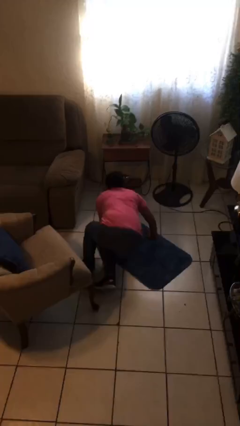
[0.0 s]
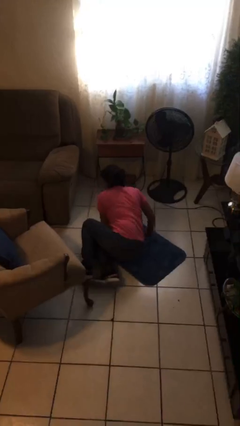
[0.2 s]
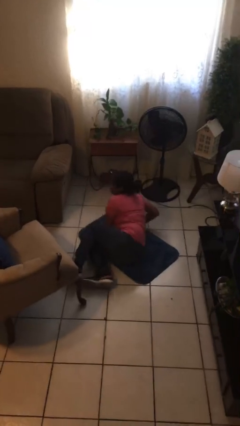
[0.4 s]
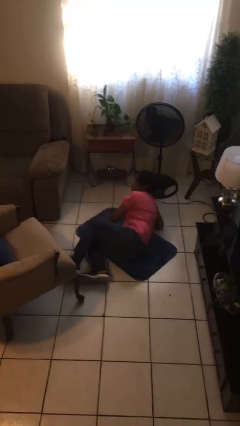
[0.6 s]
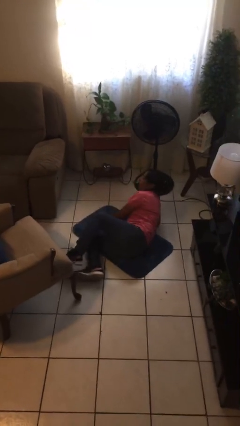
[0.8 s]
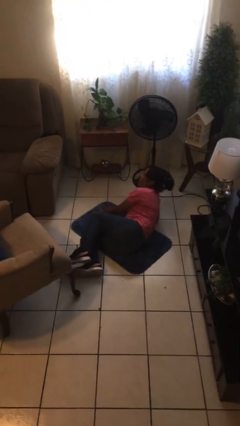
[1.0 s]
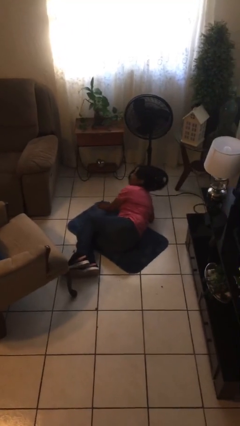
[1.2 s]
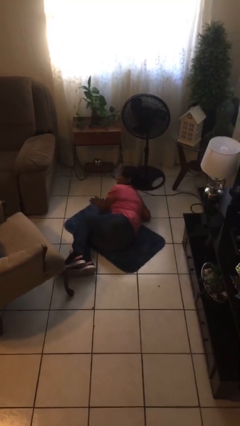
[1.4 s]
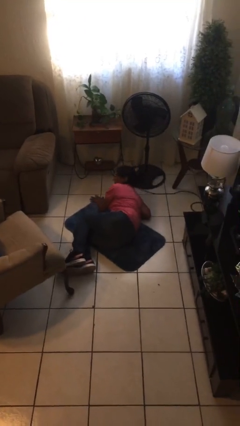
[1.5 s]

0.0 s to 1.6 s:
person falls from chair

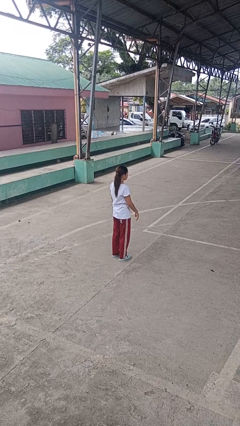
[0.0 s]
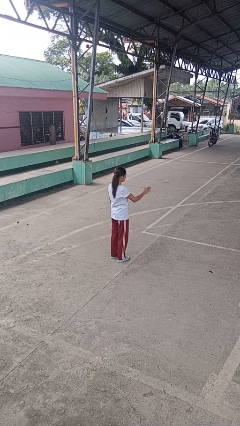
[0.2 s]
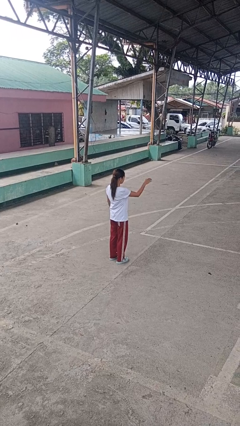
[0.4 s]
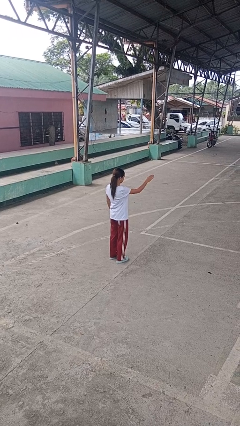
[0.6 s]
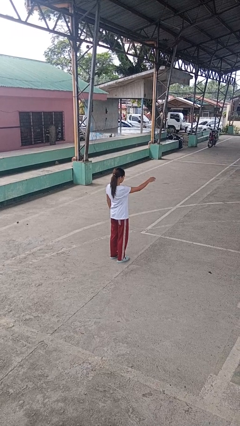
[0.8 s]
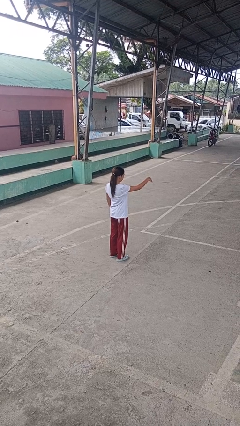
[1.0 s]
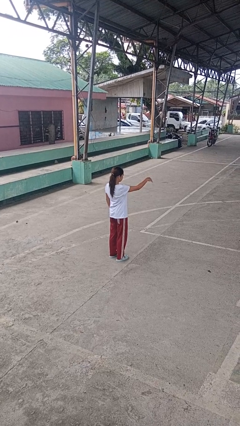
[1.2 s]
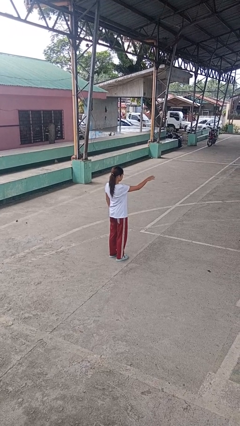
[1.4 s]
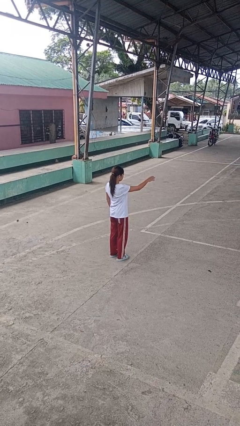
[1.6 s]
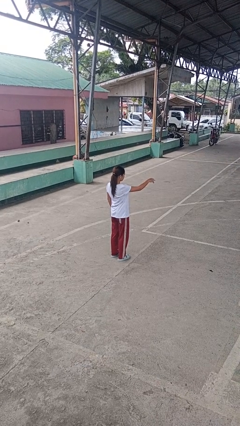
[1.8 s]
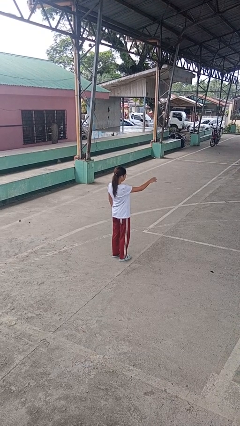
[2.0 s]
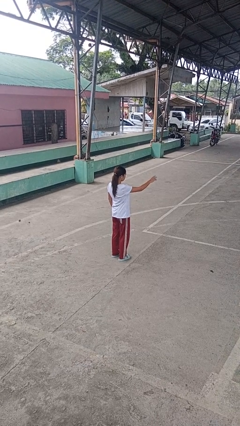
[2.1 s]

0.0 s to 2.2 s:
person gestures come here

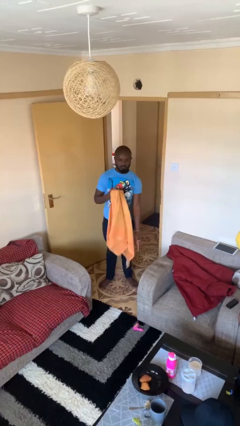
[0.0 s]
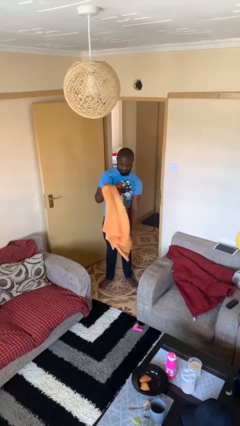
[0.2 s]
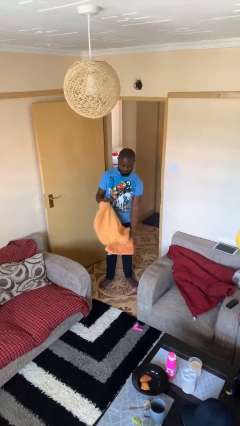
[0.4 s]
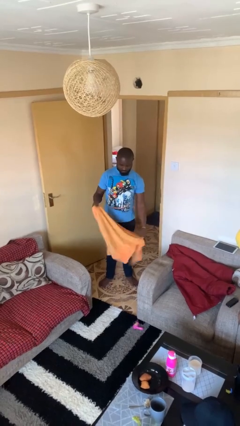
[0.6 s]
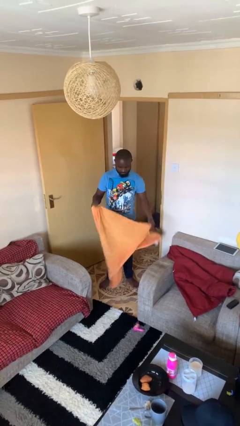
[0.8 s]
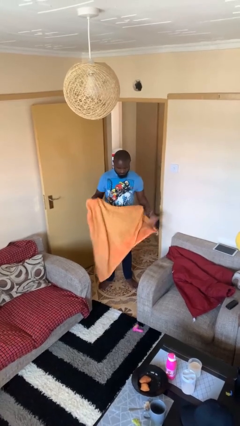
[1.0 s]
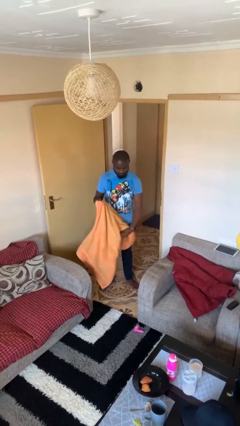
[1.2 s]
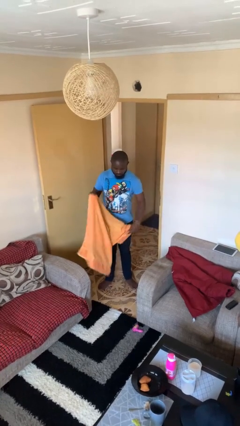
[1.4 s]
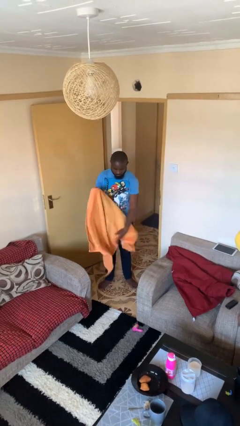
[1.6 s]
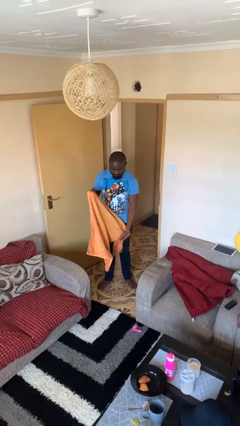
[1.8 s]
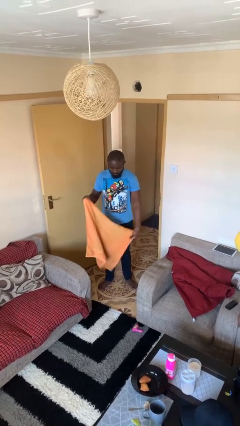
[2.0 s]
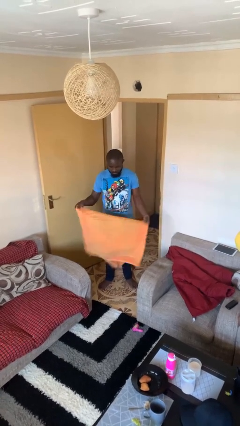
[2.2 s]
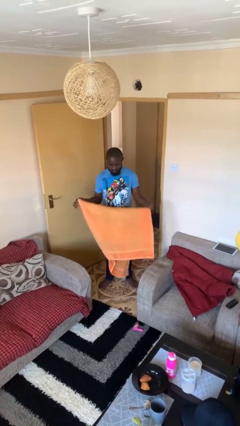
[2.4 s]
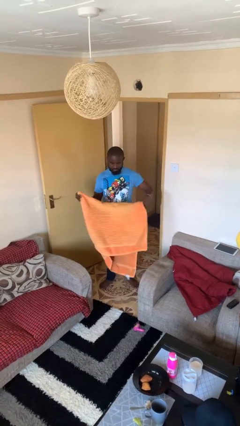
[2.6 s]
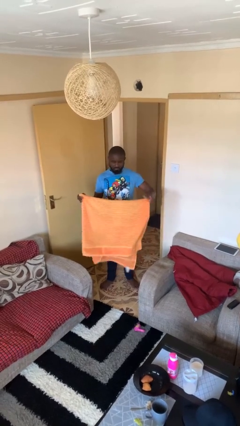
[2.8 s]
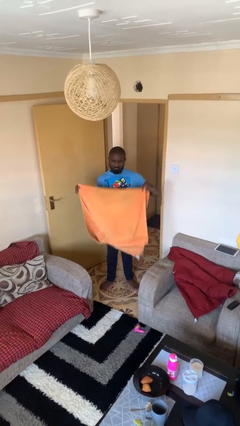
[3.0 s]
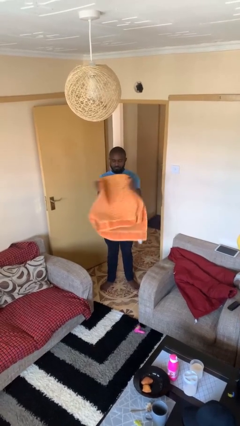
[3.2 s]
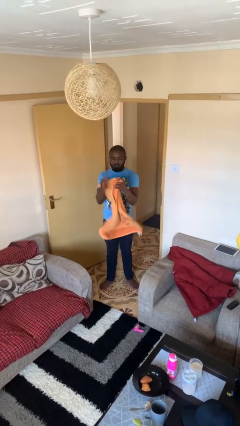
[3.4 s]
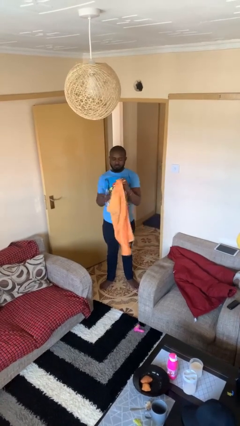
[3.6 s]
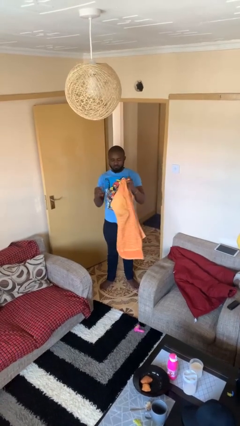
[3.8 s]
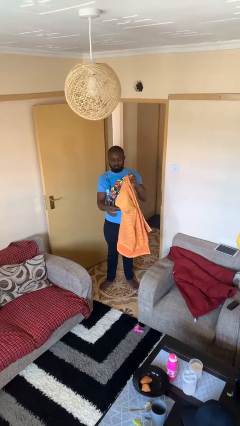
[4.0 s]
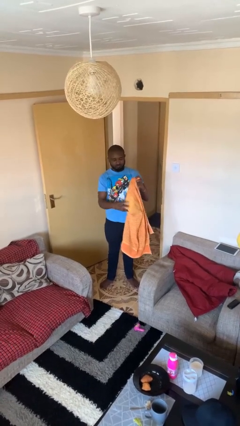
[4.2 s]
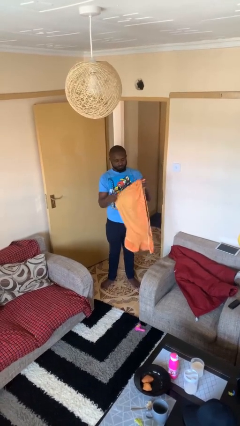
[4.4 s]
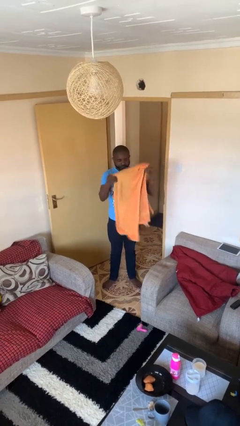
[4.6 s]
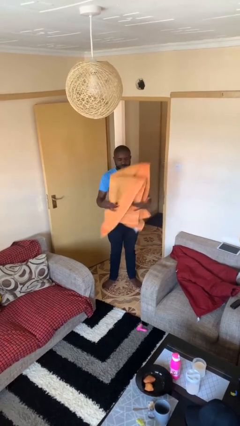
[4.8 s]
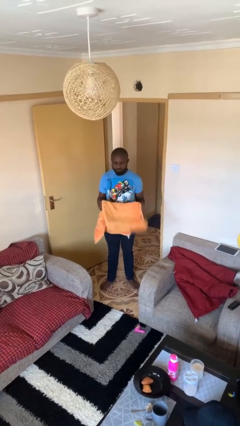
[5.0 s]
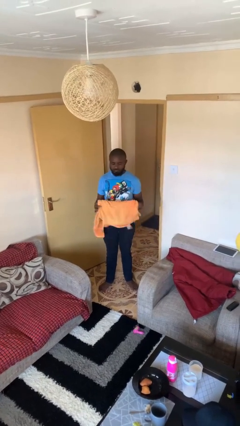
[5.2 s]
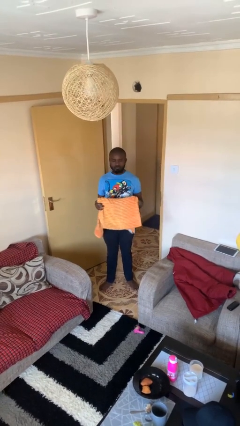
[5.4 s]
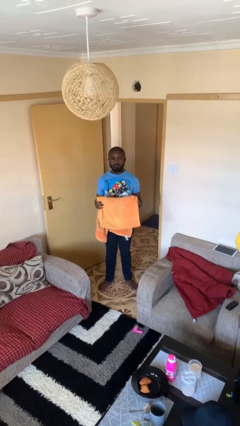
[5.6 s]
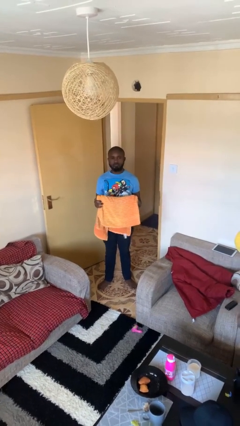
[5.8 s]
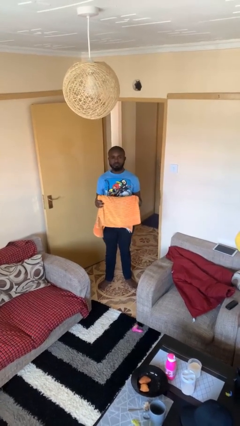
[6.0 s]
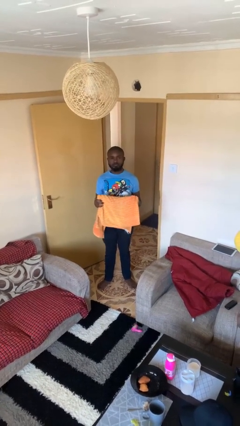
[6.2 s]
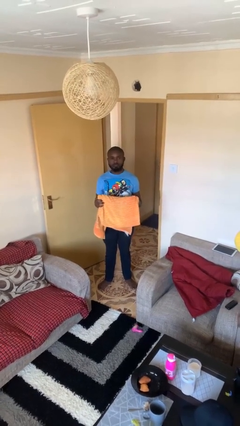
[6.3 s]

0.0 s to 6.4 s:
person folds towel

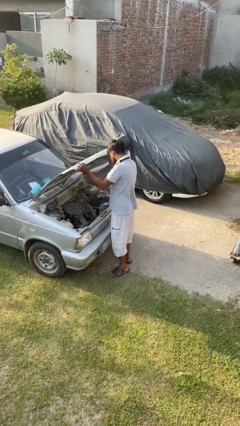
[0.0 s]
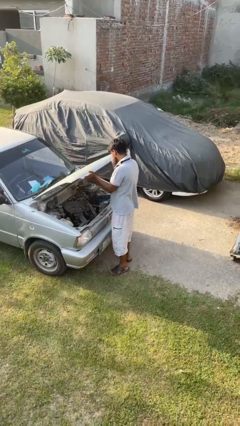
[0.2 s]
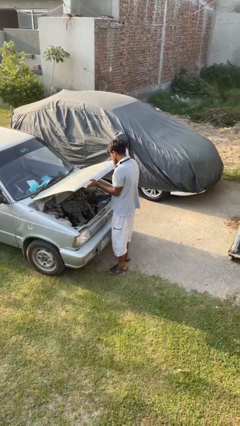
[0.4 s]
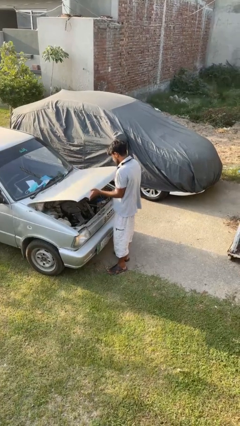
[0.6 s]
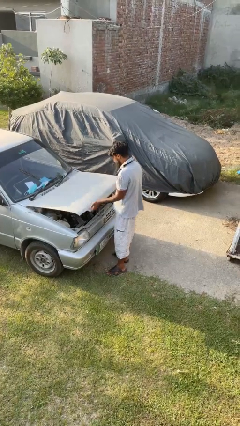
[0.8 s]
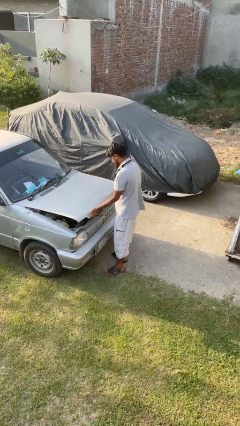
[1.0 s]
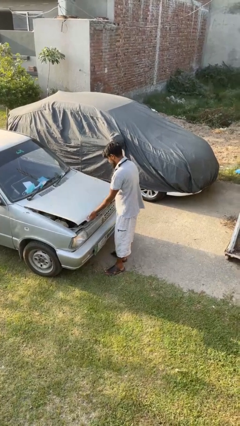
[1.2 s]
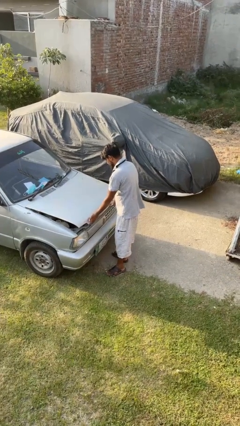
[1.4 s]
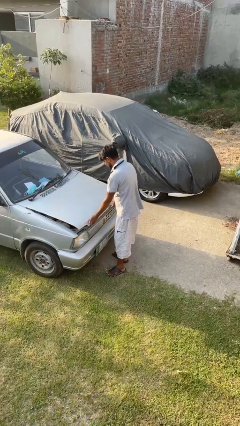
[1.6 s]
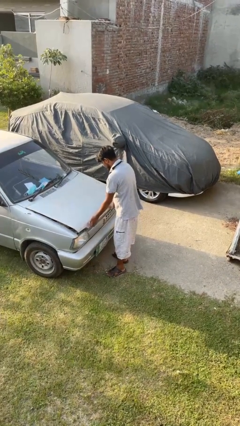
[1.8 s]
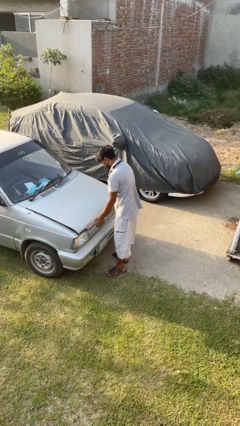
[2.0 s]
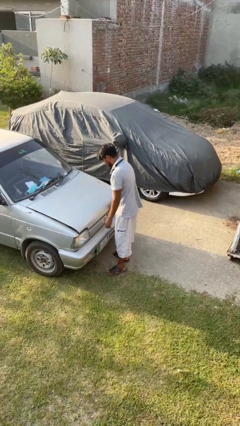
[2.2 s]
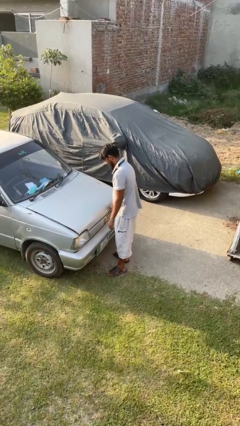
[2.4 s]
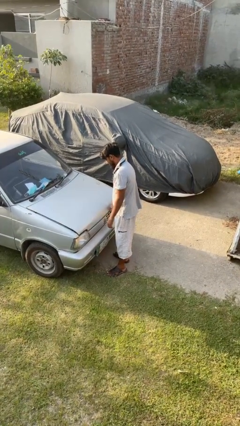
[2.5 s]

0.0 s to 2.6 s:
person closes car hood

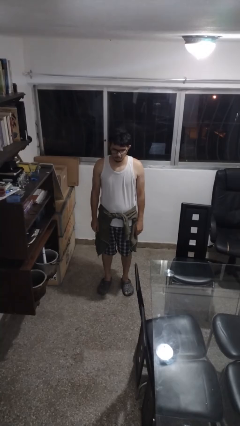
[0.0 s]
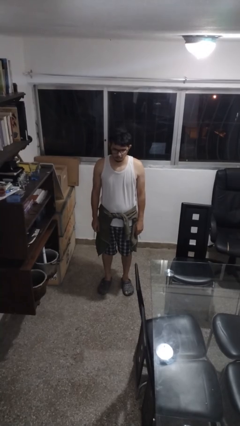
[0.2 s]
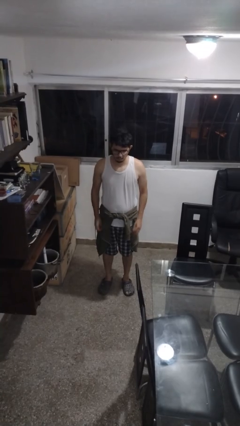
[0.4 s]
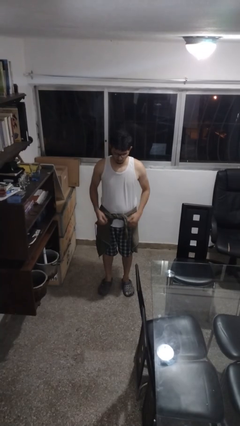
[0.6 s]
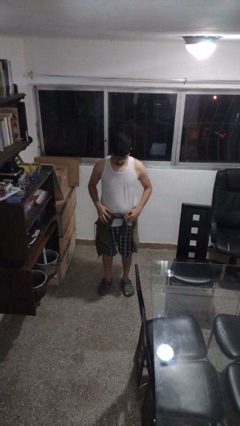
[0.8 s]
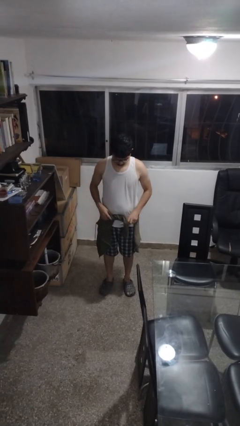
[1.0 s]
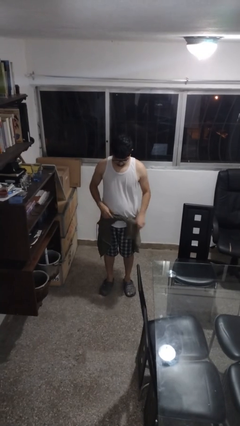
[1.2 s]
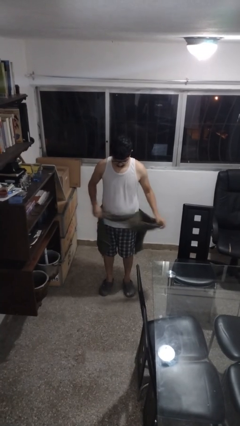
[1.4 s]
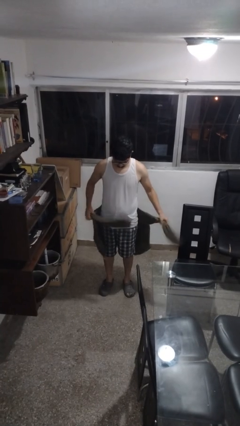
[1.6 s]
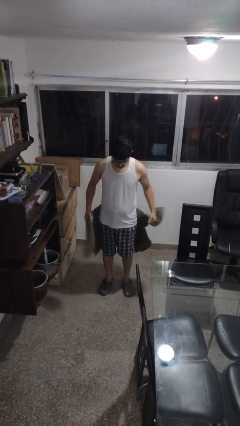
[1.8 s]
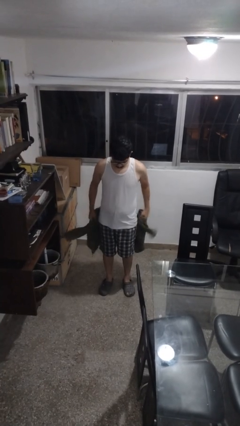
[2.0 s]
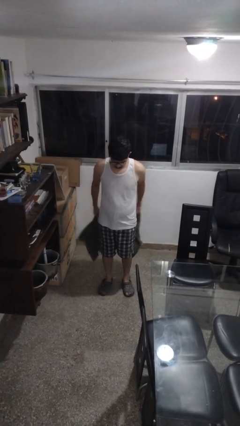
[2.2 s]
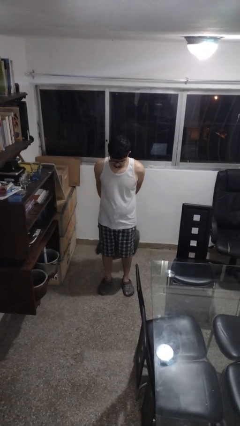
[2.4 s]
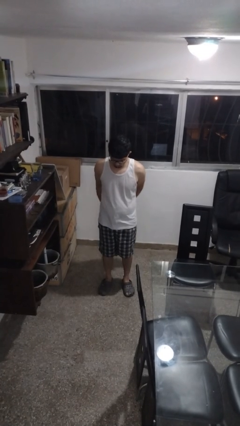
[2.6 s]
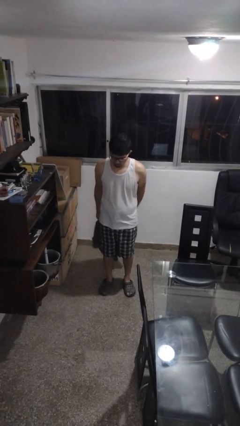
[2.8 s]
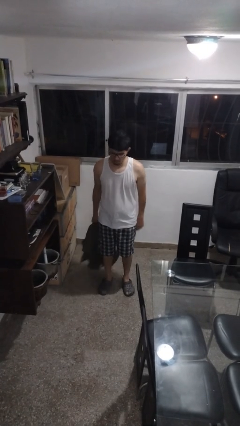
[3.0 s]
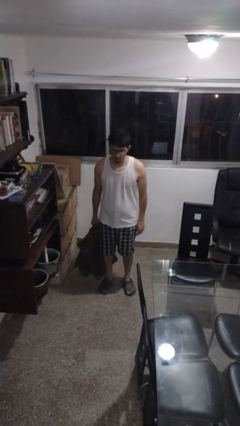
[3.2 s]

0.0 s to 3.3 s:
person unties jacket around waist

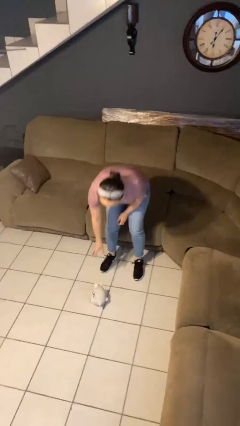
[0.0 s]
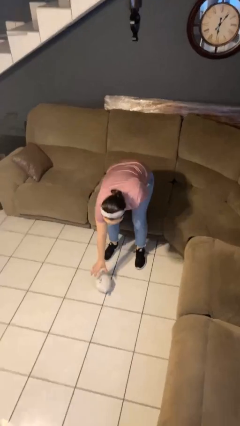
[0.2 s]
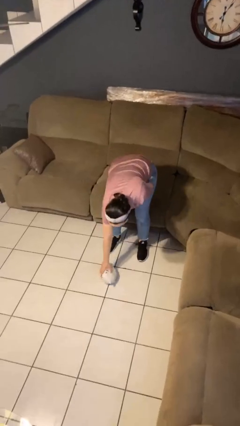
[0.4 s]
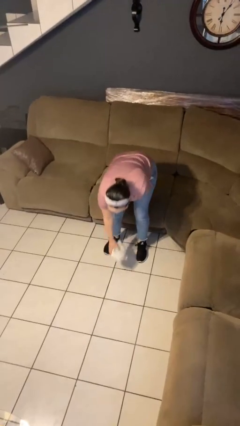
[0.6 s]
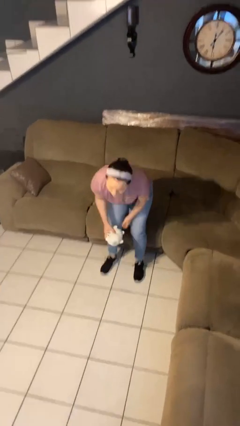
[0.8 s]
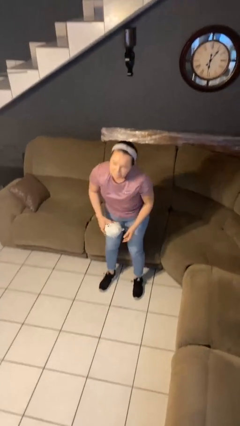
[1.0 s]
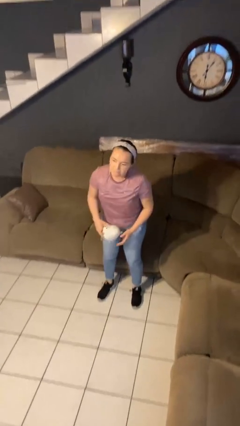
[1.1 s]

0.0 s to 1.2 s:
person picks up object from floor

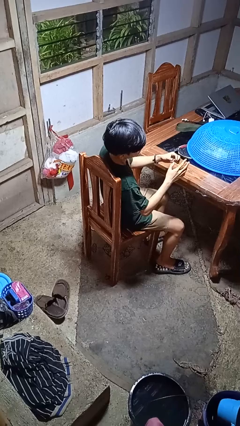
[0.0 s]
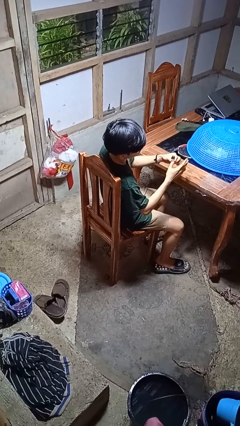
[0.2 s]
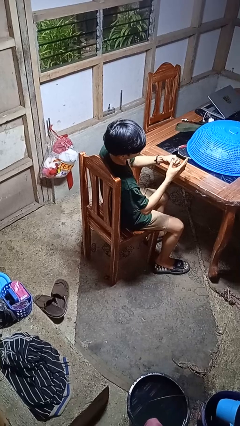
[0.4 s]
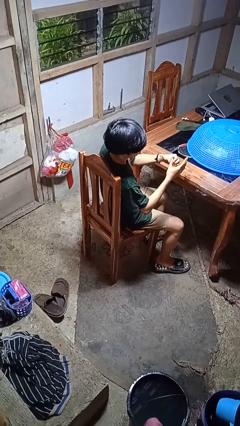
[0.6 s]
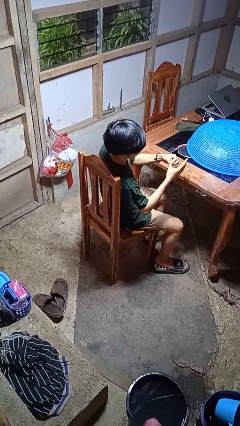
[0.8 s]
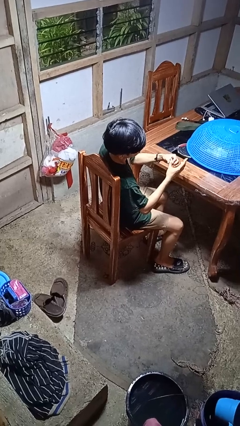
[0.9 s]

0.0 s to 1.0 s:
person puts on ring
